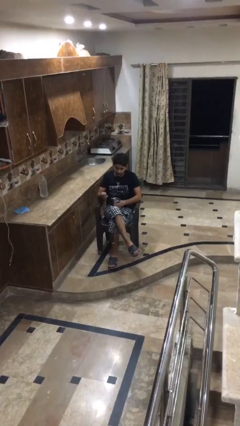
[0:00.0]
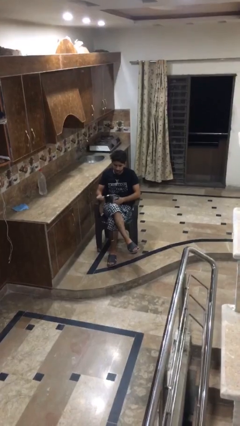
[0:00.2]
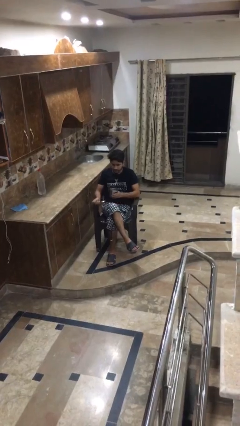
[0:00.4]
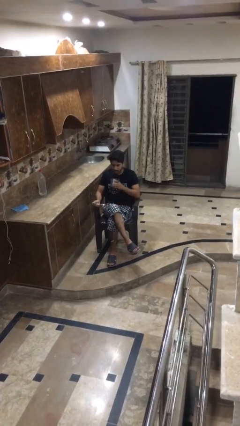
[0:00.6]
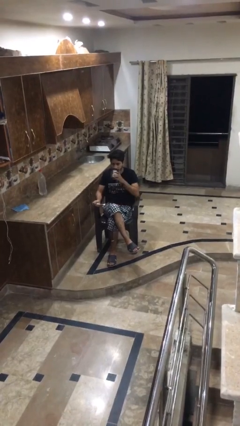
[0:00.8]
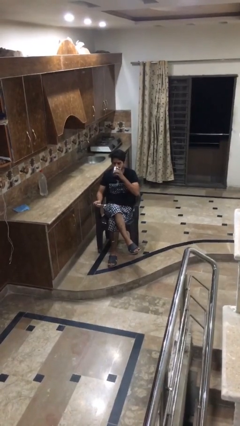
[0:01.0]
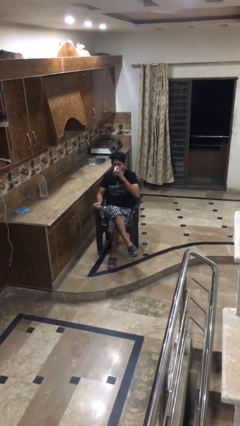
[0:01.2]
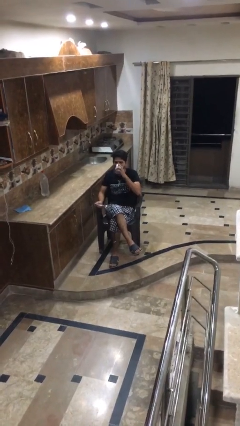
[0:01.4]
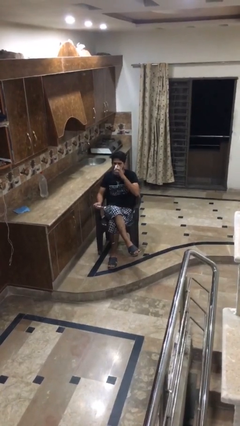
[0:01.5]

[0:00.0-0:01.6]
person drinks from mug

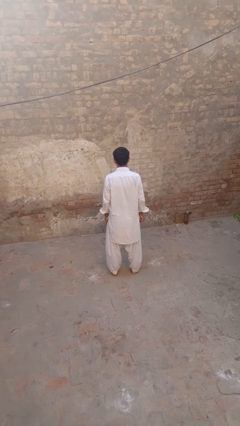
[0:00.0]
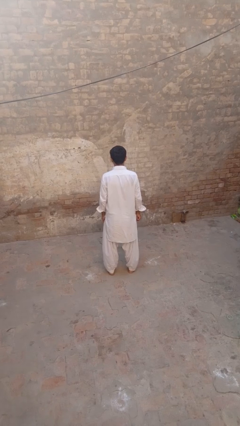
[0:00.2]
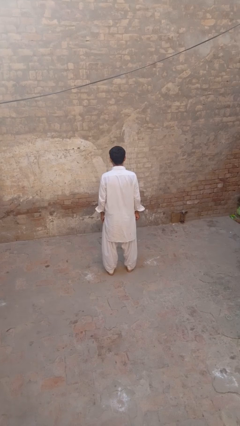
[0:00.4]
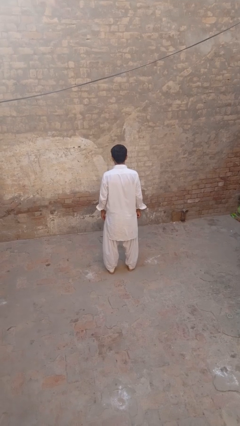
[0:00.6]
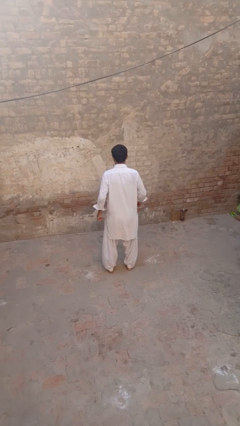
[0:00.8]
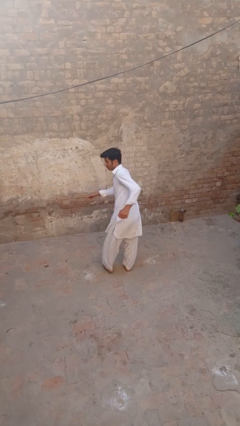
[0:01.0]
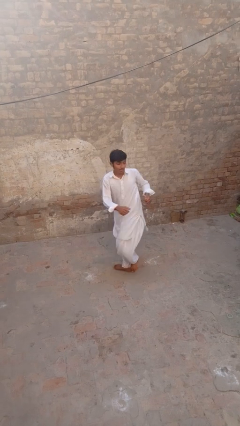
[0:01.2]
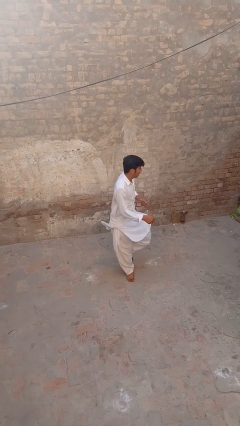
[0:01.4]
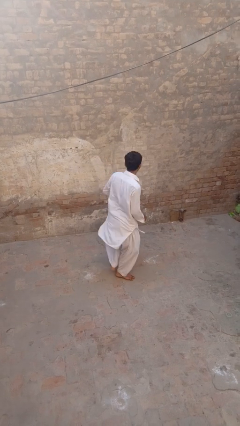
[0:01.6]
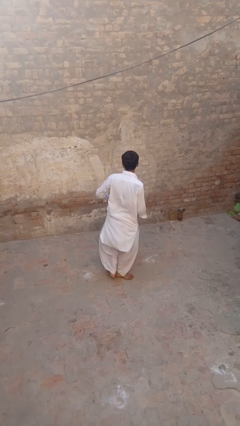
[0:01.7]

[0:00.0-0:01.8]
person twirls

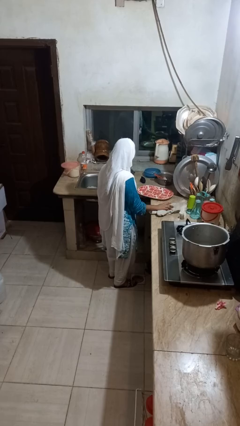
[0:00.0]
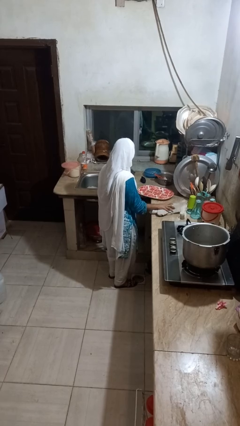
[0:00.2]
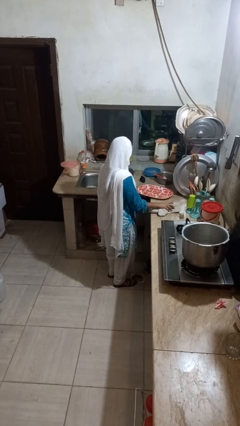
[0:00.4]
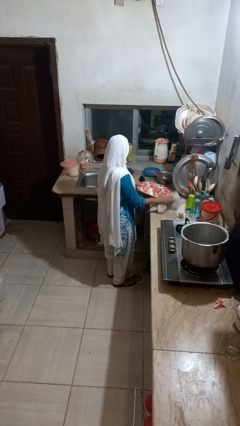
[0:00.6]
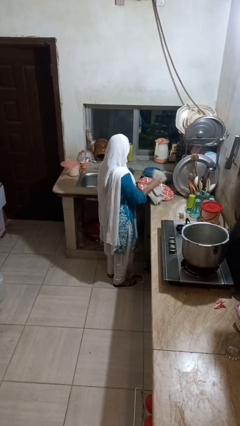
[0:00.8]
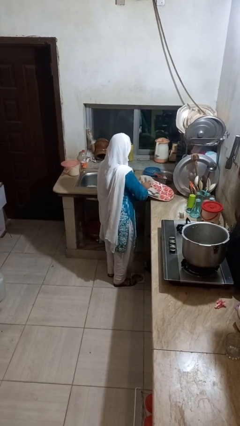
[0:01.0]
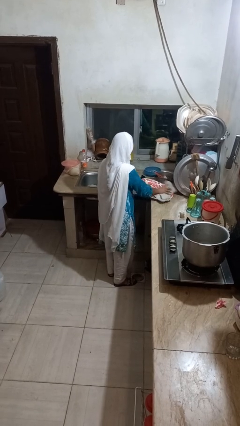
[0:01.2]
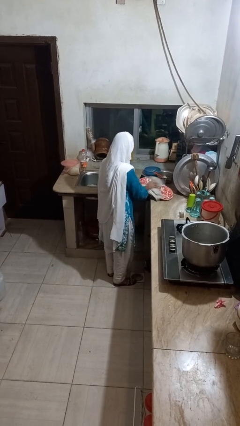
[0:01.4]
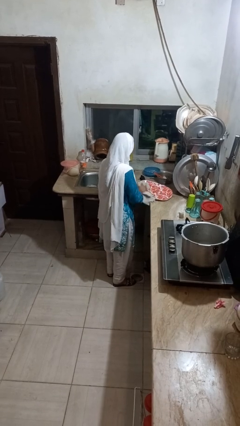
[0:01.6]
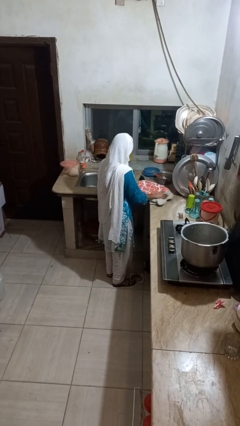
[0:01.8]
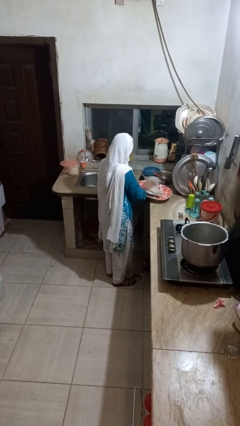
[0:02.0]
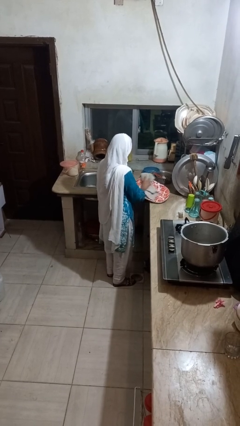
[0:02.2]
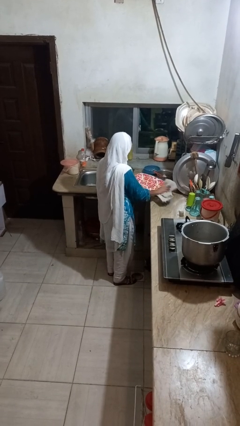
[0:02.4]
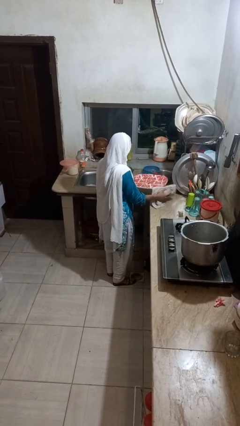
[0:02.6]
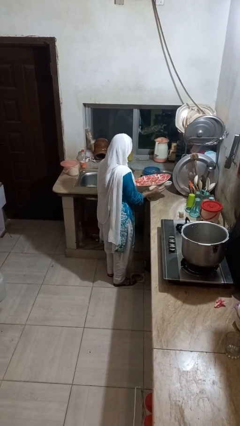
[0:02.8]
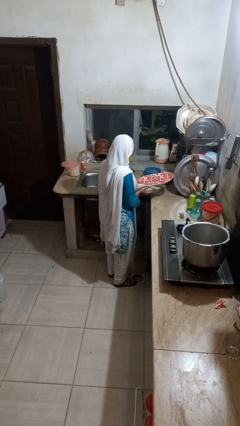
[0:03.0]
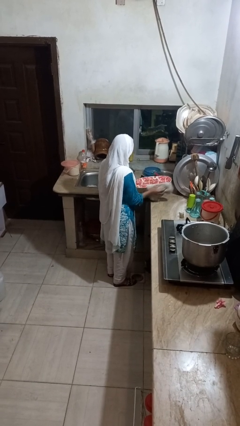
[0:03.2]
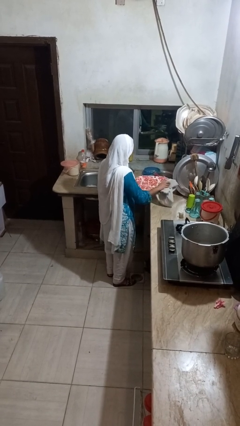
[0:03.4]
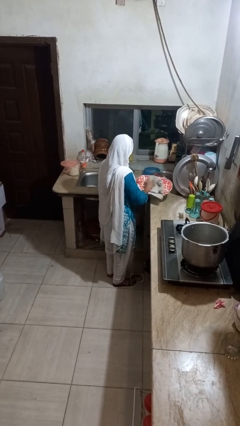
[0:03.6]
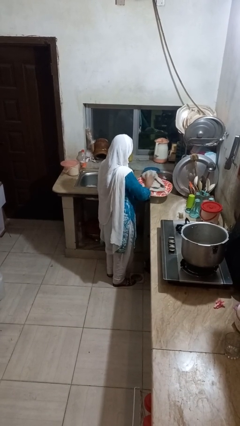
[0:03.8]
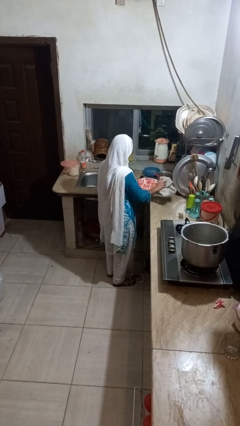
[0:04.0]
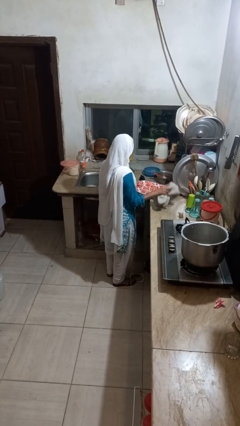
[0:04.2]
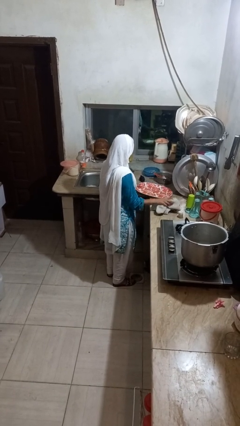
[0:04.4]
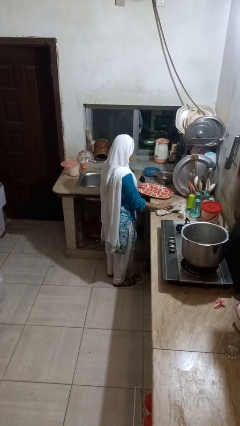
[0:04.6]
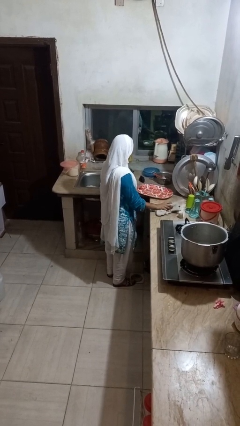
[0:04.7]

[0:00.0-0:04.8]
person dries dish

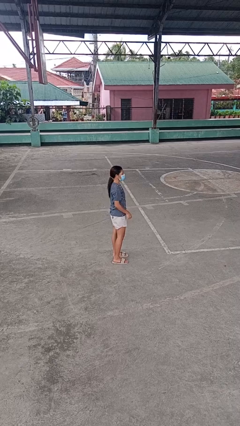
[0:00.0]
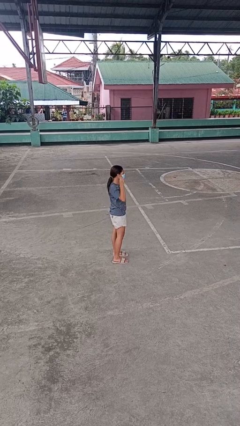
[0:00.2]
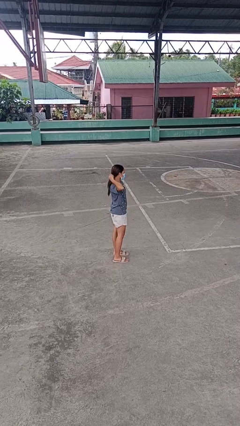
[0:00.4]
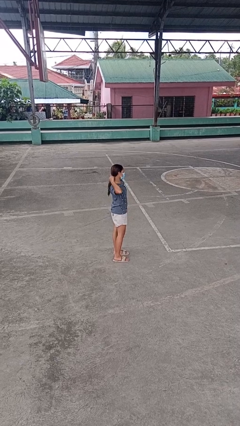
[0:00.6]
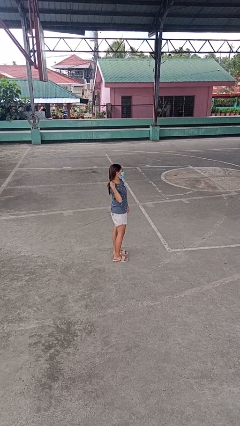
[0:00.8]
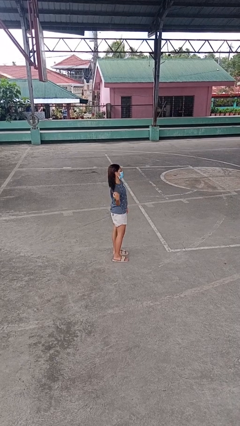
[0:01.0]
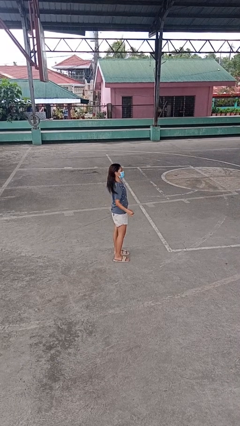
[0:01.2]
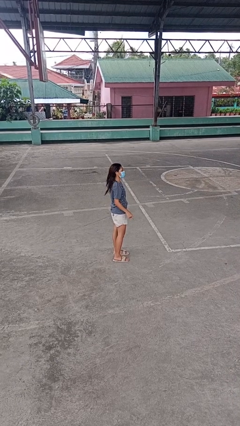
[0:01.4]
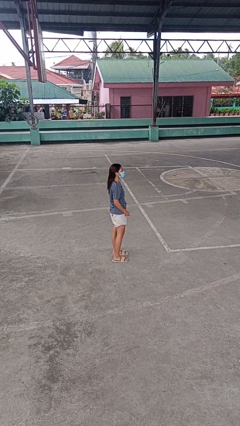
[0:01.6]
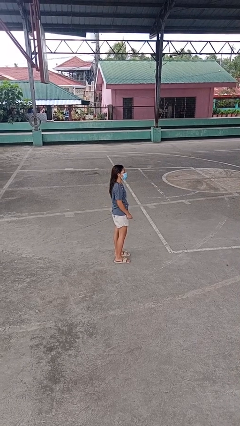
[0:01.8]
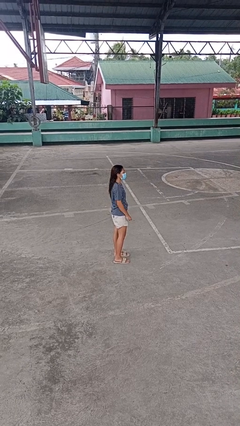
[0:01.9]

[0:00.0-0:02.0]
person takes off hairtie

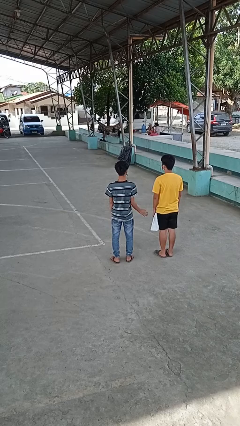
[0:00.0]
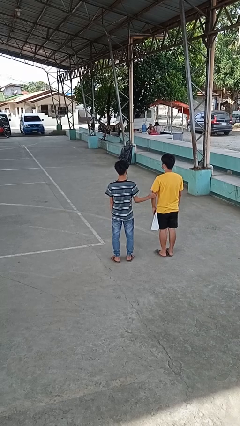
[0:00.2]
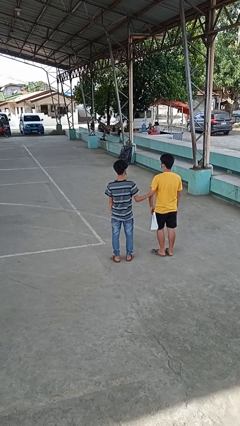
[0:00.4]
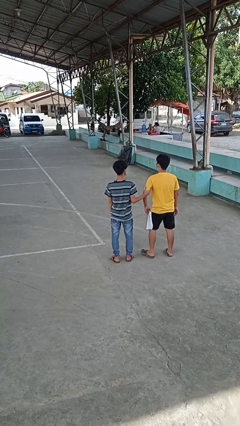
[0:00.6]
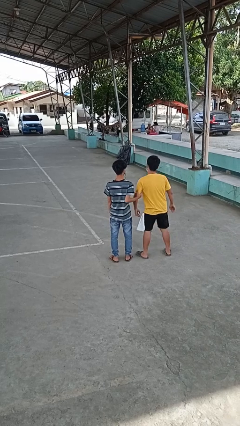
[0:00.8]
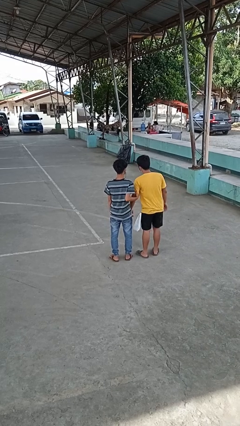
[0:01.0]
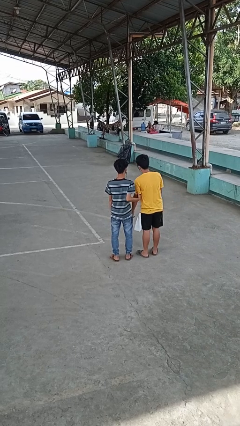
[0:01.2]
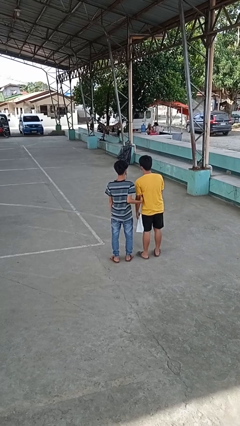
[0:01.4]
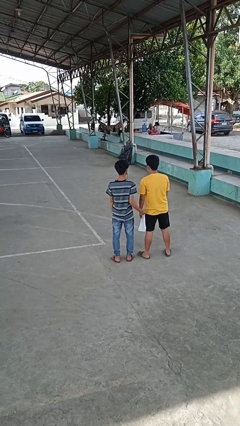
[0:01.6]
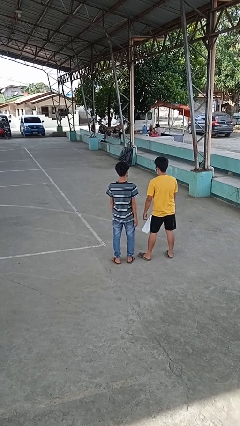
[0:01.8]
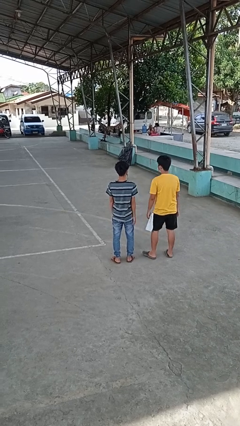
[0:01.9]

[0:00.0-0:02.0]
person grabs person by bicep

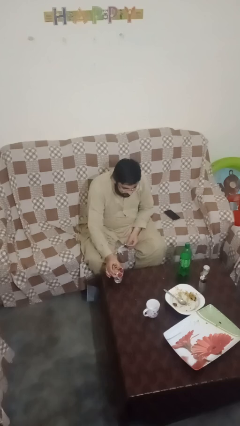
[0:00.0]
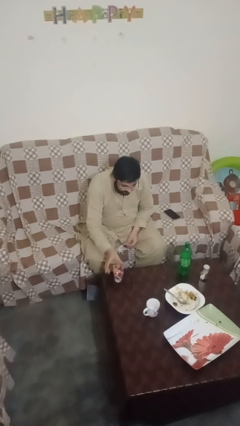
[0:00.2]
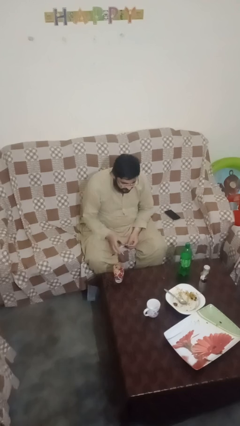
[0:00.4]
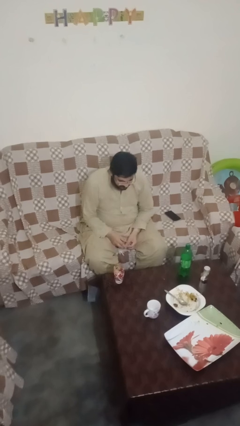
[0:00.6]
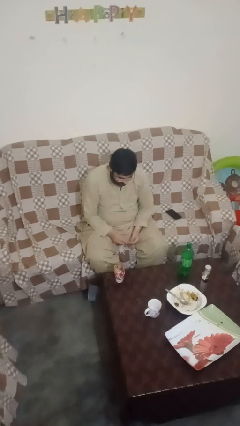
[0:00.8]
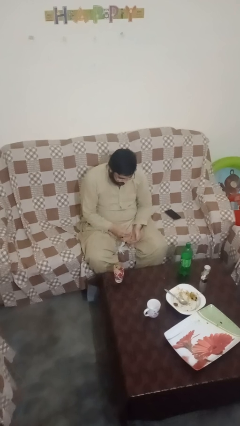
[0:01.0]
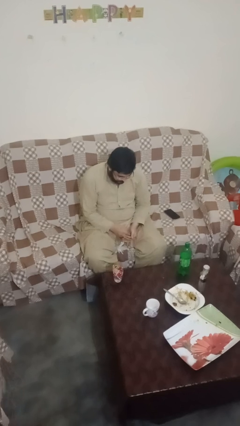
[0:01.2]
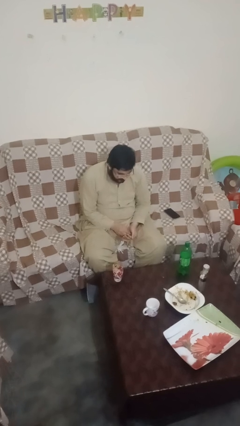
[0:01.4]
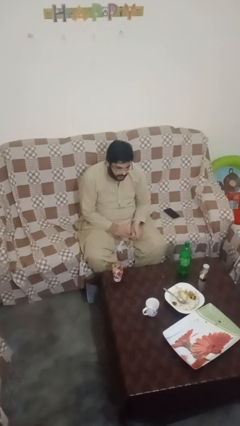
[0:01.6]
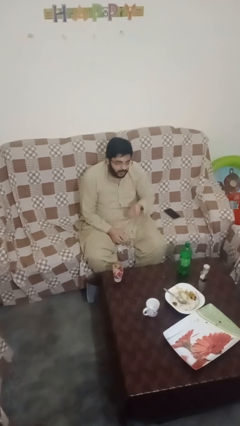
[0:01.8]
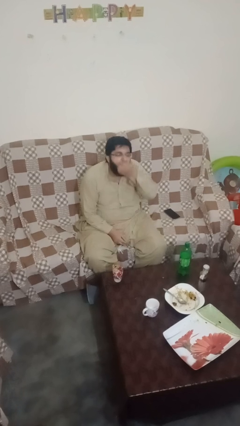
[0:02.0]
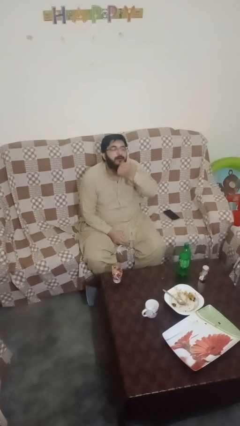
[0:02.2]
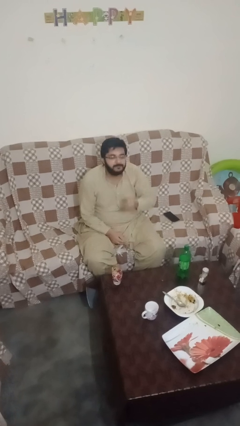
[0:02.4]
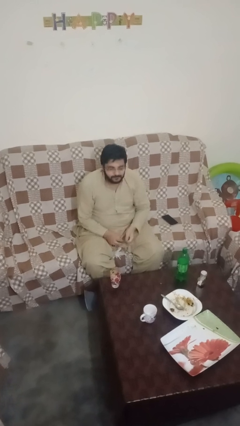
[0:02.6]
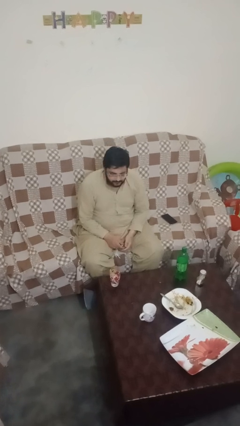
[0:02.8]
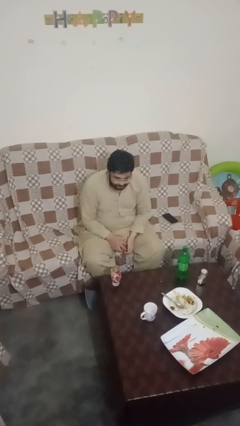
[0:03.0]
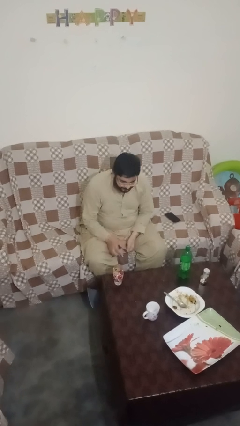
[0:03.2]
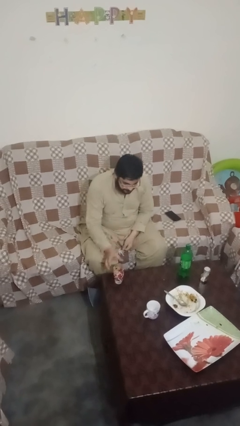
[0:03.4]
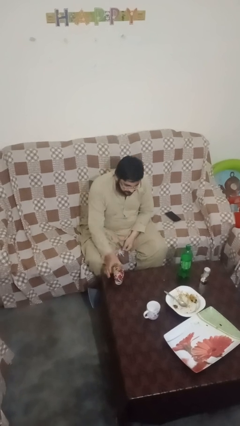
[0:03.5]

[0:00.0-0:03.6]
person takes medicine pills

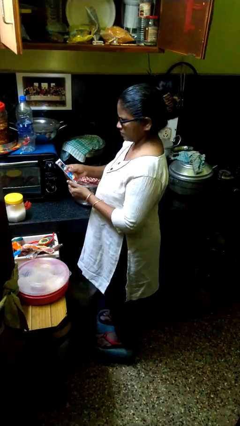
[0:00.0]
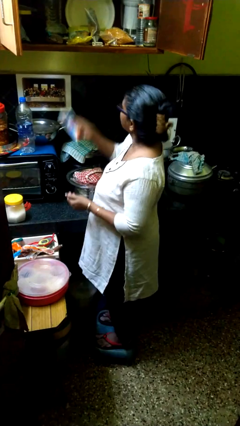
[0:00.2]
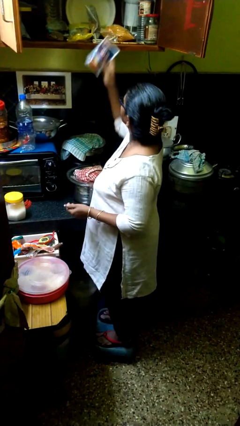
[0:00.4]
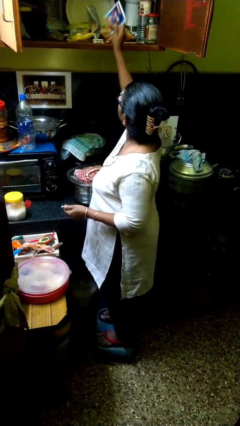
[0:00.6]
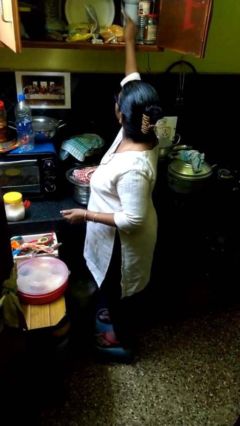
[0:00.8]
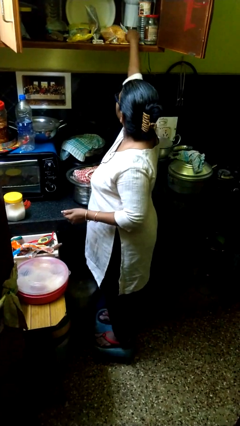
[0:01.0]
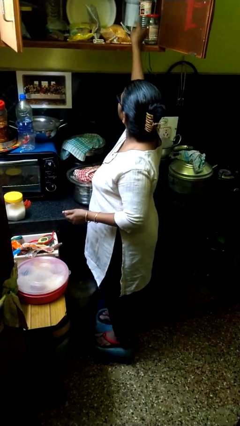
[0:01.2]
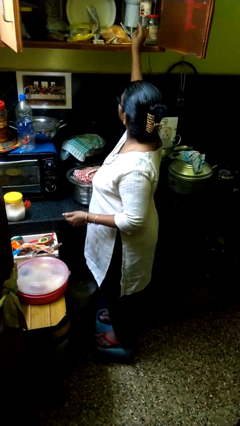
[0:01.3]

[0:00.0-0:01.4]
person puts object in cabinet
